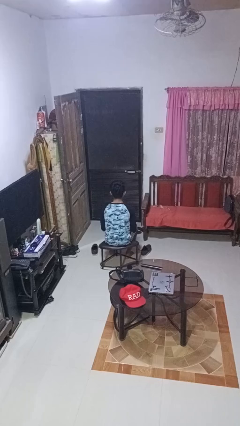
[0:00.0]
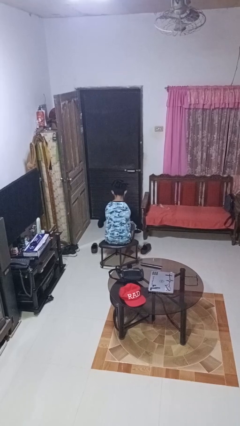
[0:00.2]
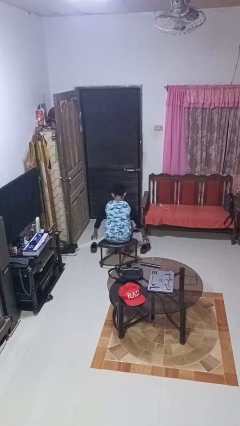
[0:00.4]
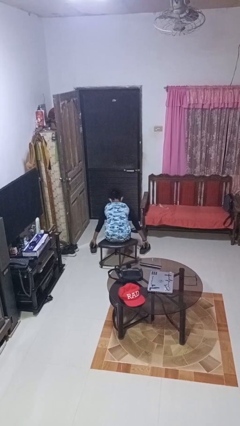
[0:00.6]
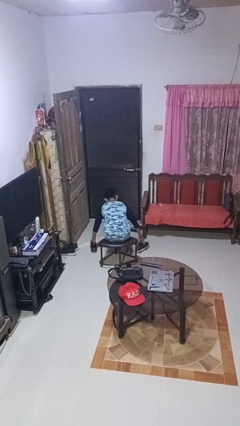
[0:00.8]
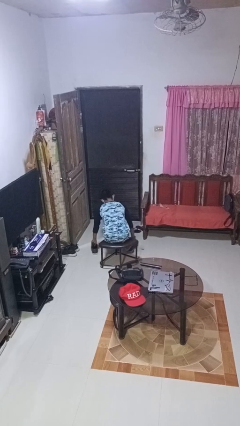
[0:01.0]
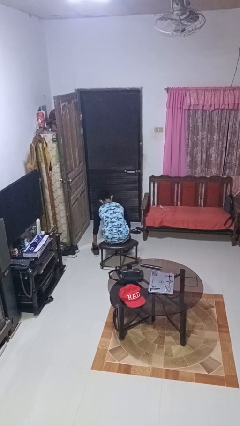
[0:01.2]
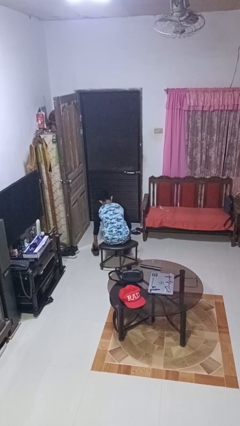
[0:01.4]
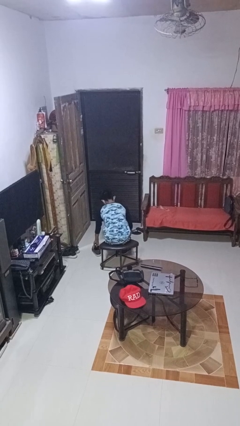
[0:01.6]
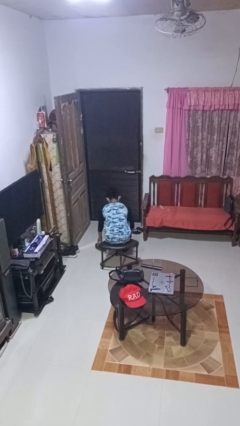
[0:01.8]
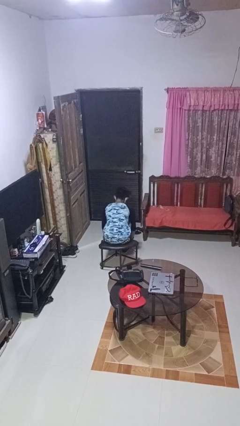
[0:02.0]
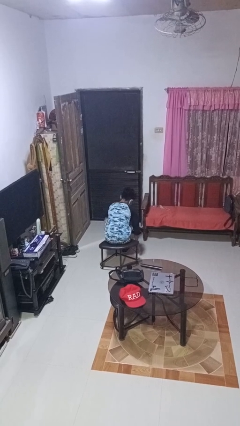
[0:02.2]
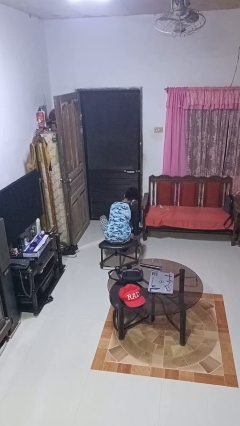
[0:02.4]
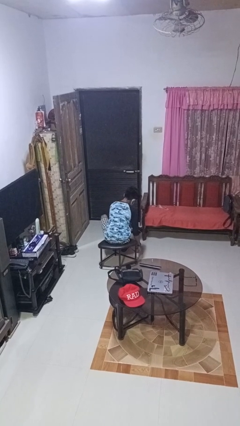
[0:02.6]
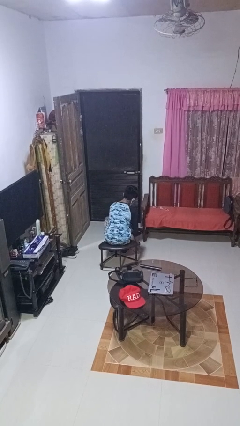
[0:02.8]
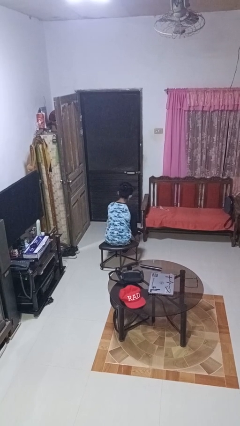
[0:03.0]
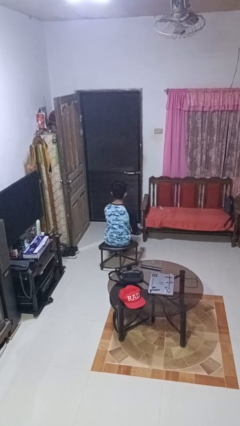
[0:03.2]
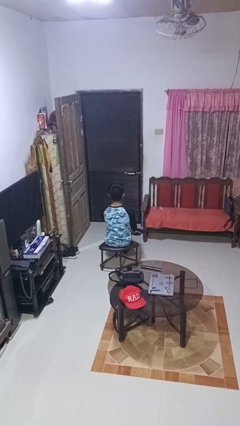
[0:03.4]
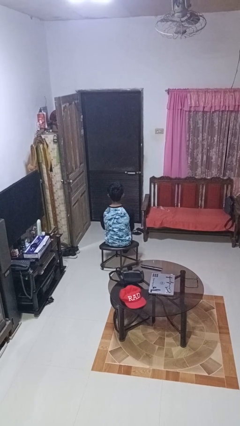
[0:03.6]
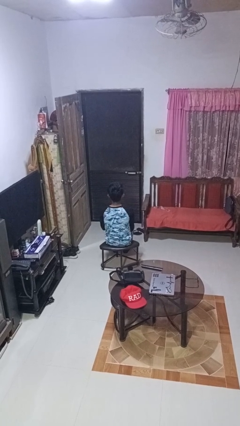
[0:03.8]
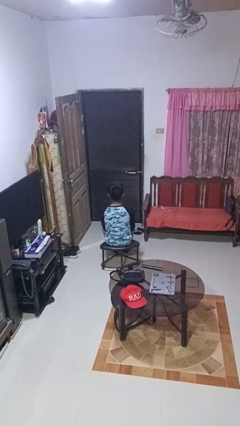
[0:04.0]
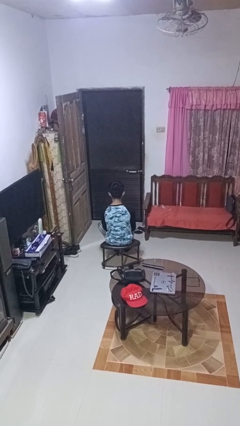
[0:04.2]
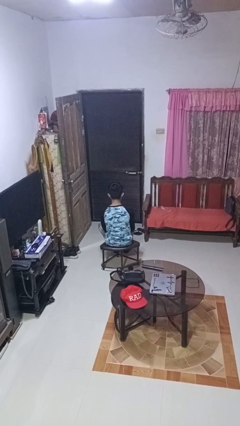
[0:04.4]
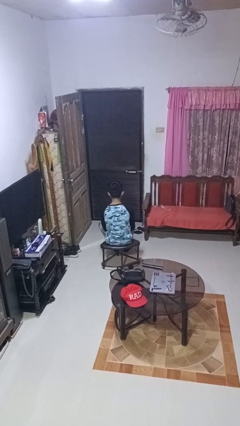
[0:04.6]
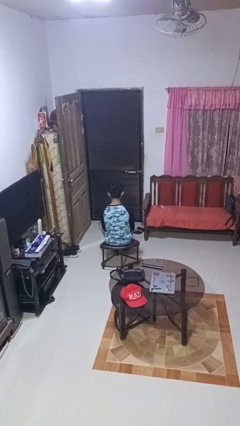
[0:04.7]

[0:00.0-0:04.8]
person puts on shoes

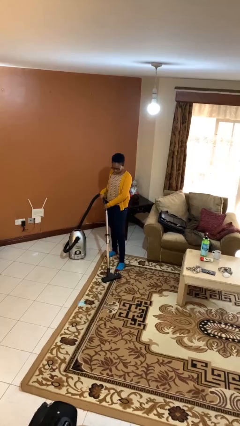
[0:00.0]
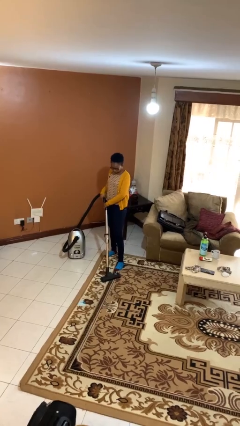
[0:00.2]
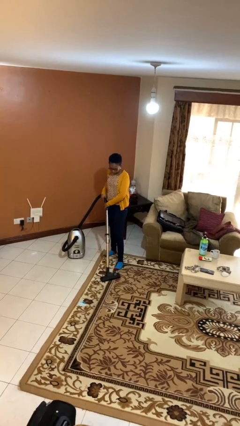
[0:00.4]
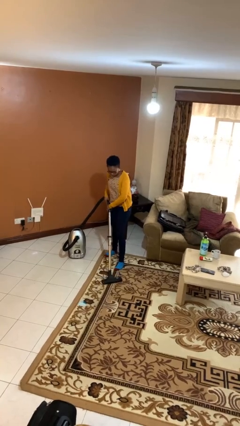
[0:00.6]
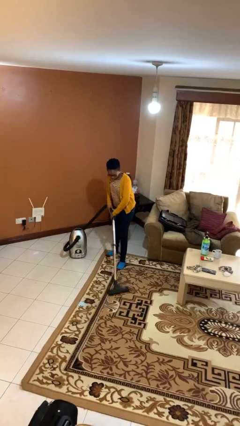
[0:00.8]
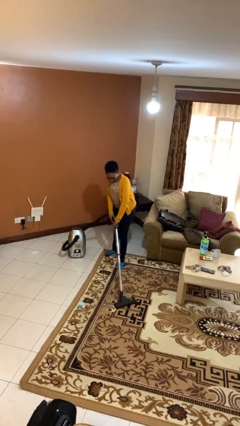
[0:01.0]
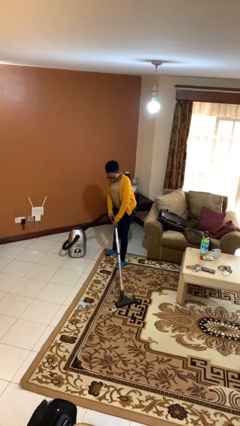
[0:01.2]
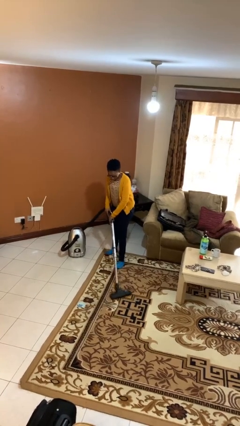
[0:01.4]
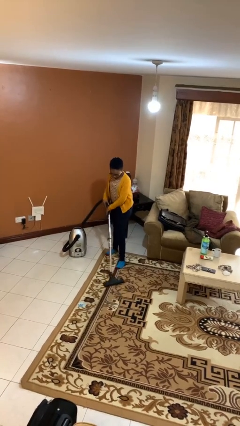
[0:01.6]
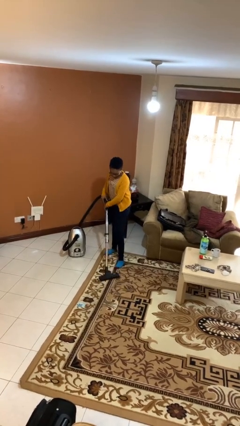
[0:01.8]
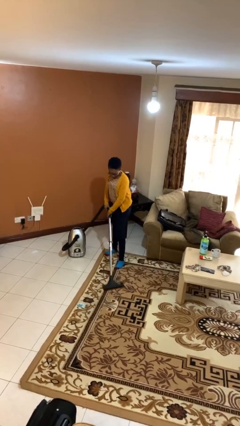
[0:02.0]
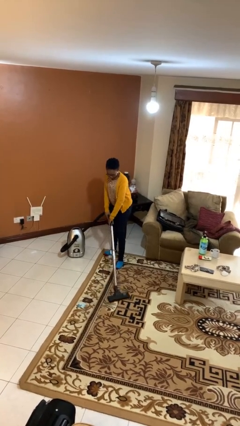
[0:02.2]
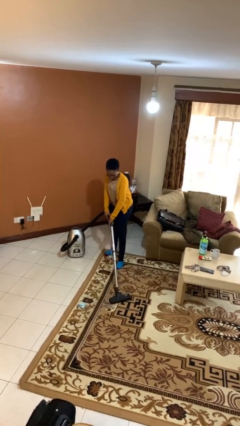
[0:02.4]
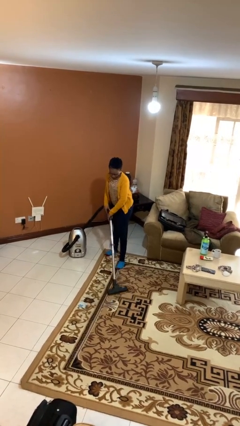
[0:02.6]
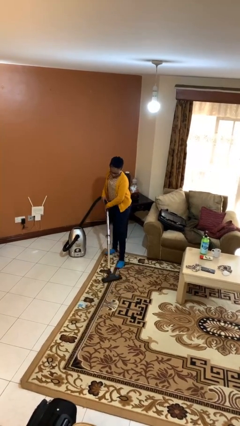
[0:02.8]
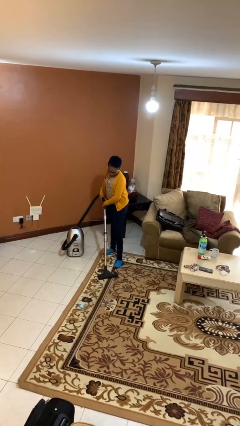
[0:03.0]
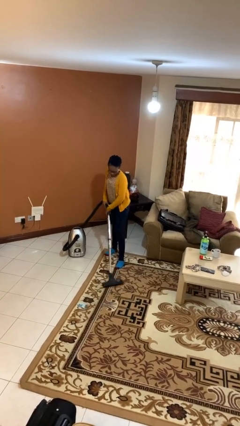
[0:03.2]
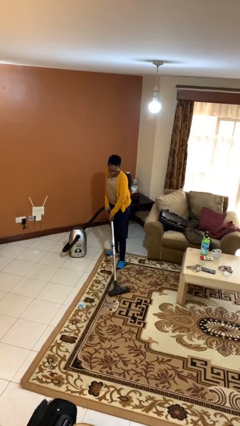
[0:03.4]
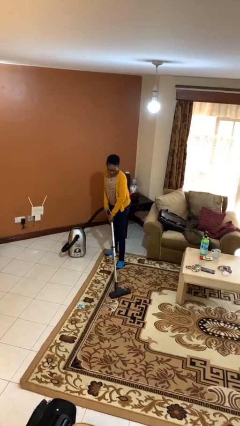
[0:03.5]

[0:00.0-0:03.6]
person vacuums carpet

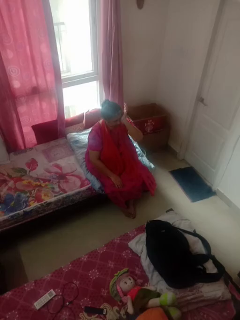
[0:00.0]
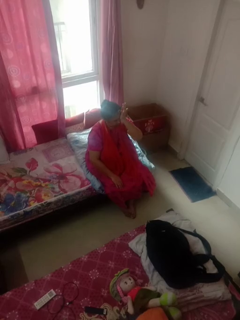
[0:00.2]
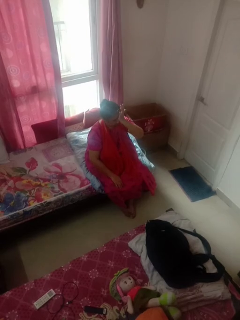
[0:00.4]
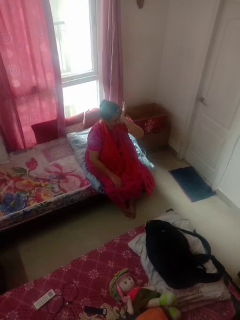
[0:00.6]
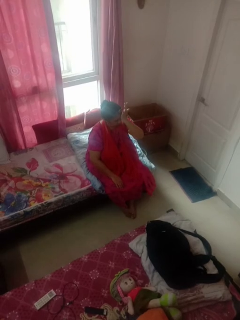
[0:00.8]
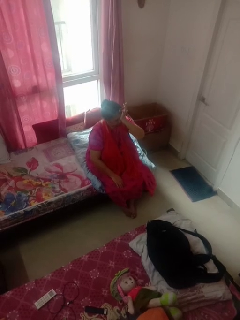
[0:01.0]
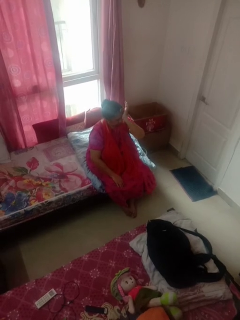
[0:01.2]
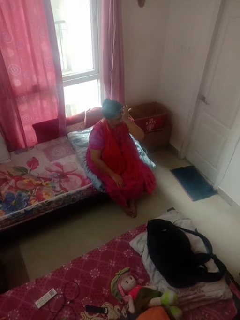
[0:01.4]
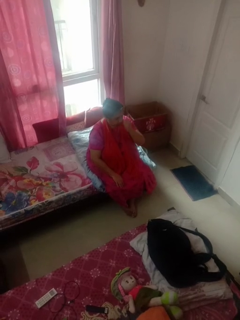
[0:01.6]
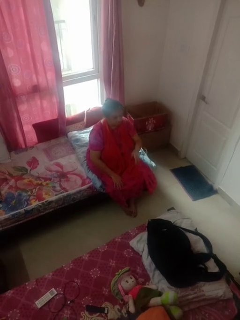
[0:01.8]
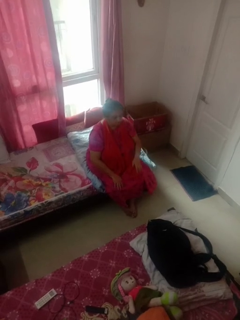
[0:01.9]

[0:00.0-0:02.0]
person rubs eyes

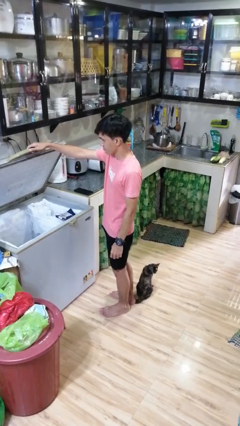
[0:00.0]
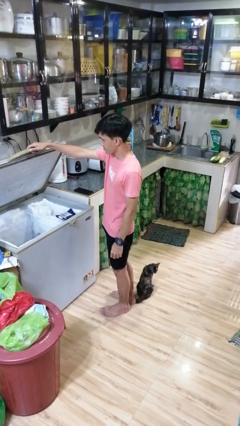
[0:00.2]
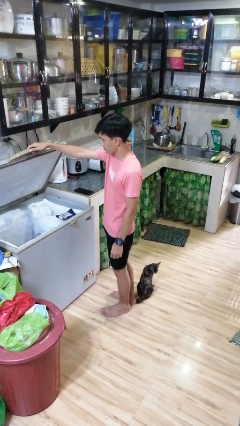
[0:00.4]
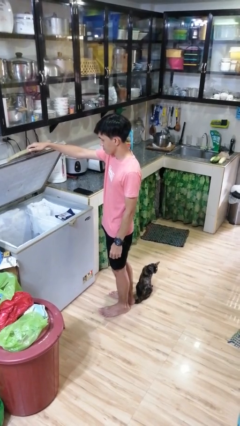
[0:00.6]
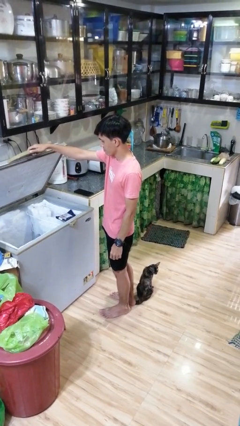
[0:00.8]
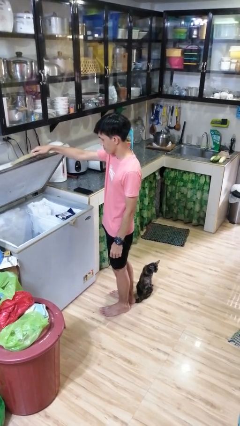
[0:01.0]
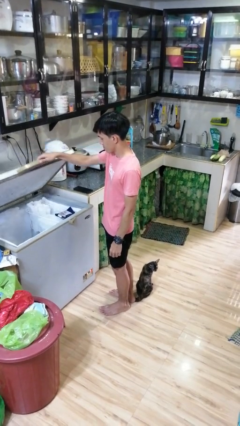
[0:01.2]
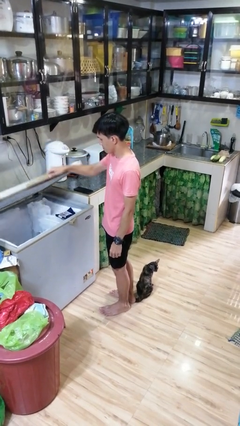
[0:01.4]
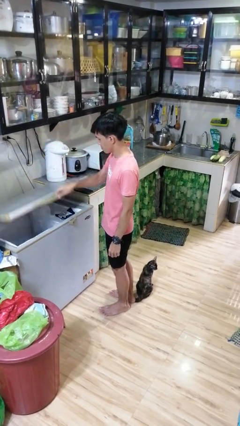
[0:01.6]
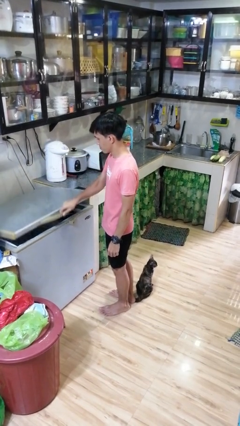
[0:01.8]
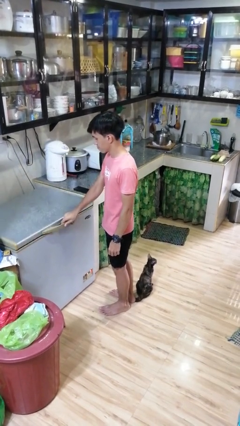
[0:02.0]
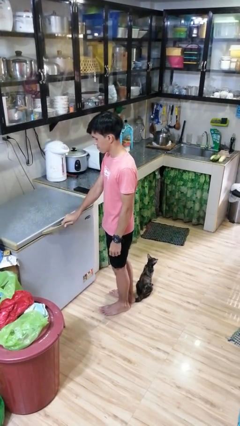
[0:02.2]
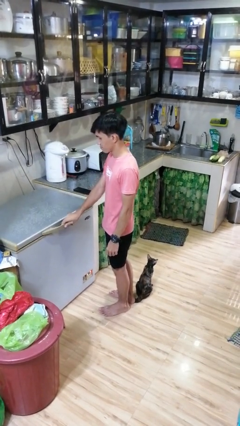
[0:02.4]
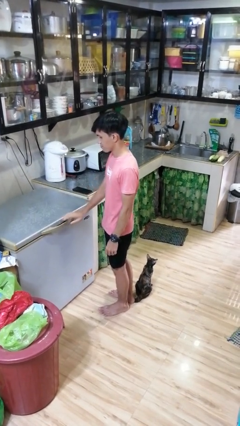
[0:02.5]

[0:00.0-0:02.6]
person closes refrigerator

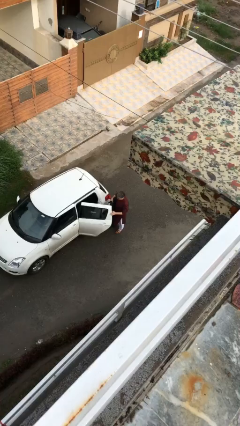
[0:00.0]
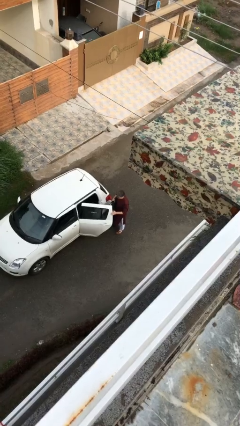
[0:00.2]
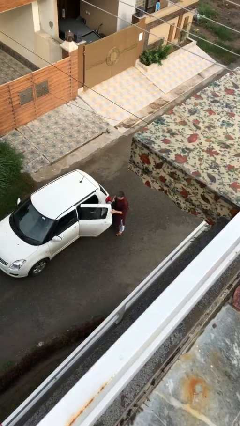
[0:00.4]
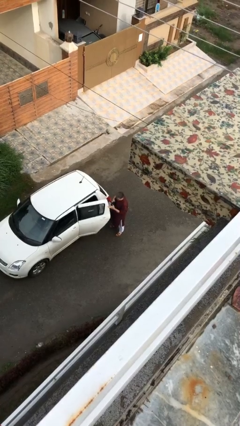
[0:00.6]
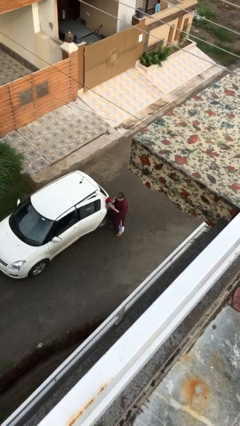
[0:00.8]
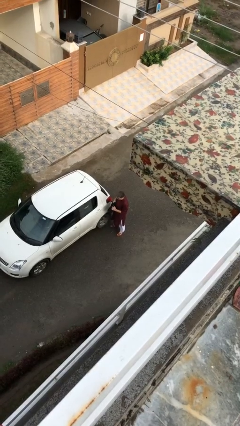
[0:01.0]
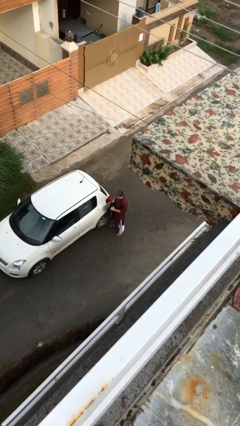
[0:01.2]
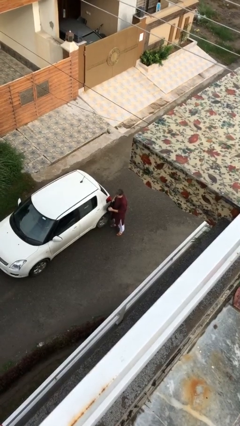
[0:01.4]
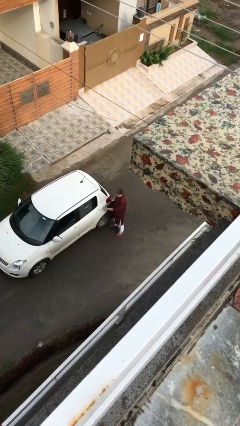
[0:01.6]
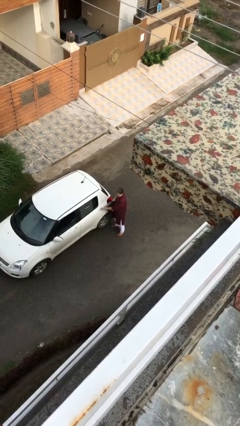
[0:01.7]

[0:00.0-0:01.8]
person closes car door

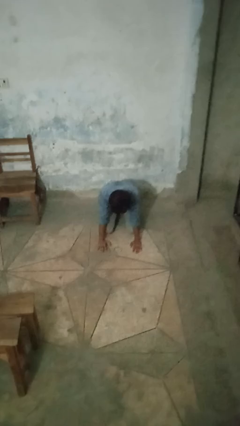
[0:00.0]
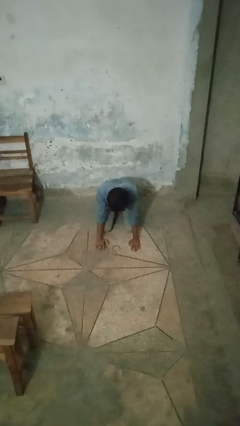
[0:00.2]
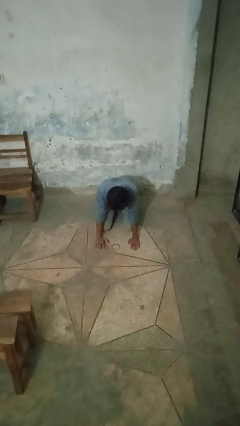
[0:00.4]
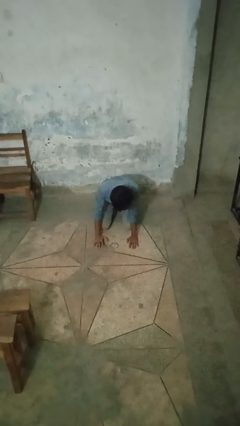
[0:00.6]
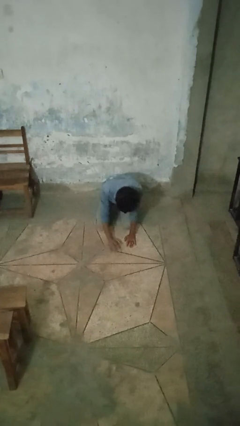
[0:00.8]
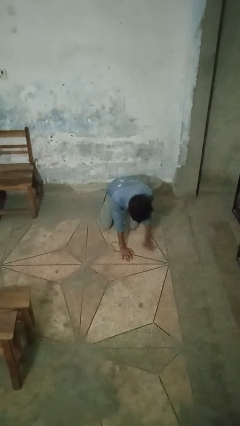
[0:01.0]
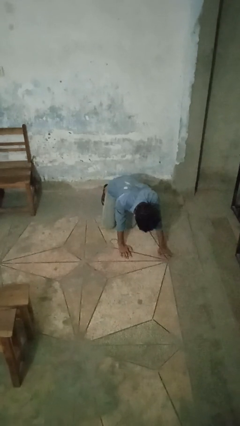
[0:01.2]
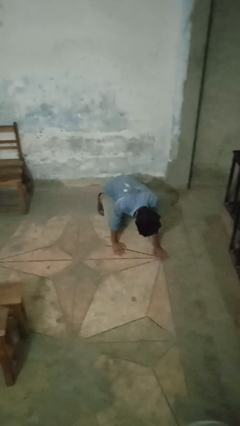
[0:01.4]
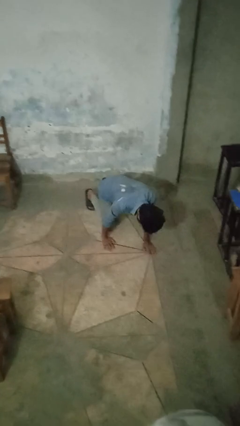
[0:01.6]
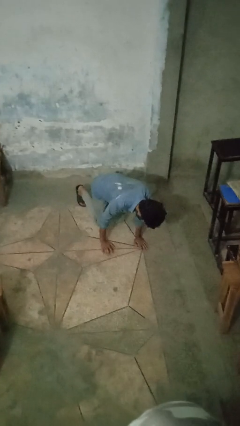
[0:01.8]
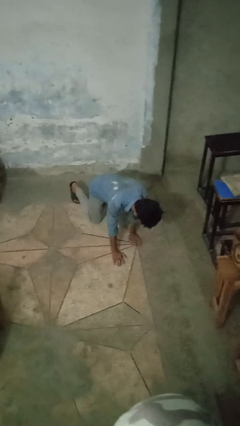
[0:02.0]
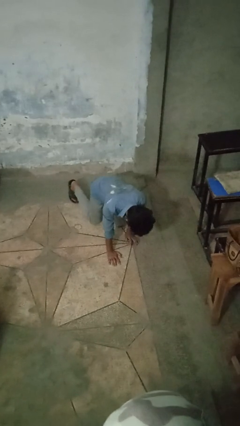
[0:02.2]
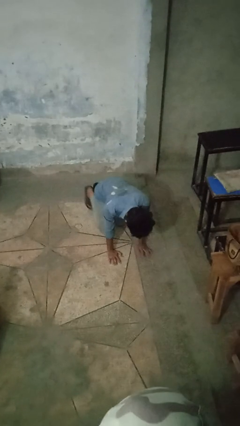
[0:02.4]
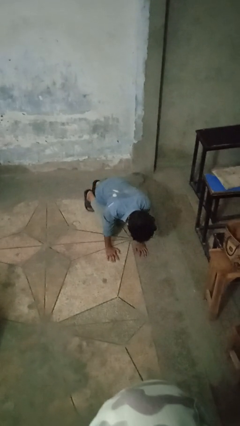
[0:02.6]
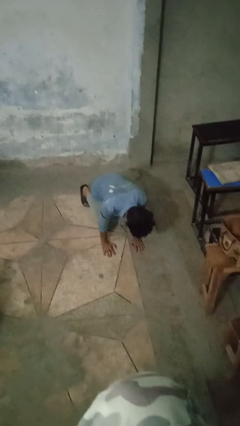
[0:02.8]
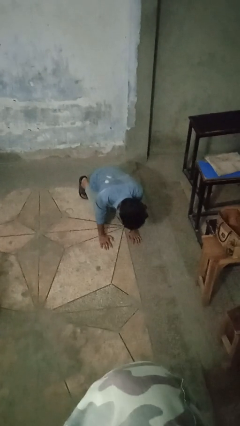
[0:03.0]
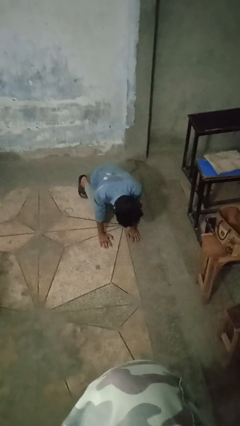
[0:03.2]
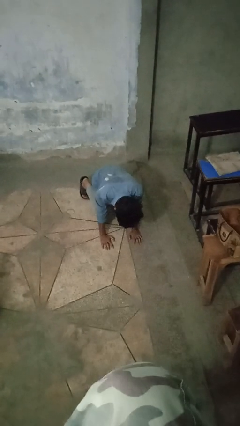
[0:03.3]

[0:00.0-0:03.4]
person crawls
